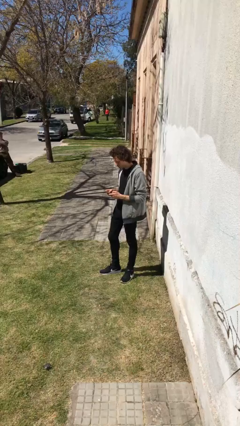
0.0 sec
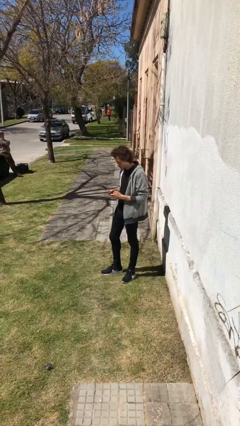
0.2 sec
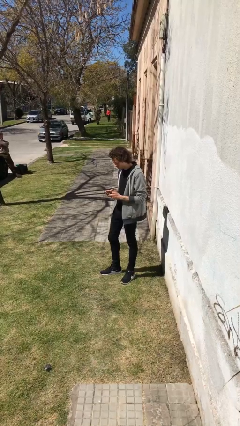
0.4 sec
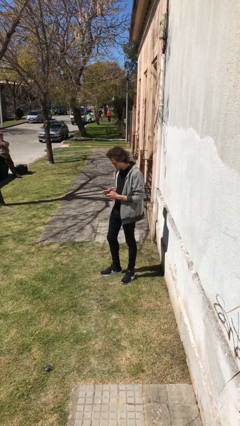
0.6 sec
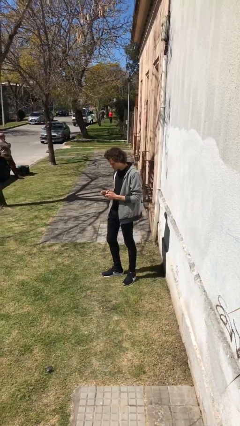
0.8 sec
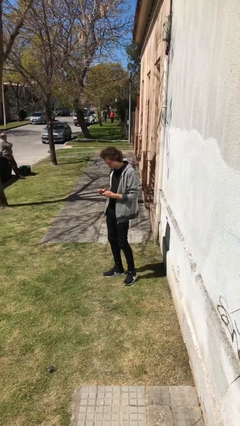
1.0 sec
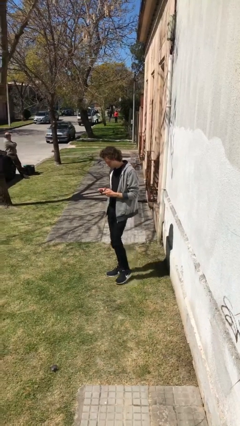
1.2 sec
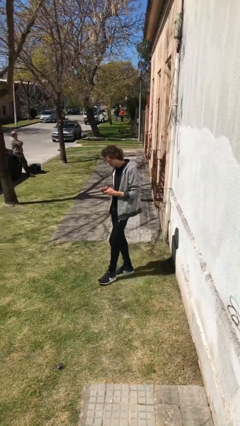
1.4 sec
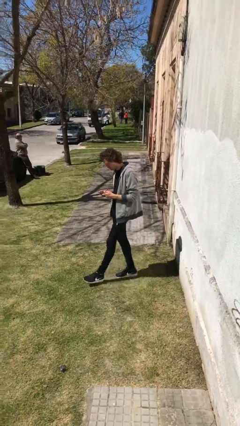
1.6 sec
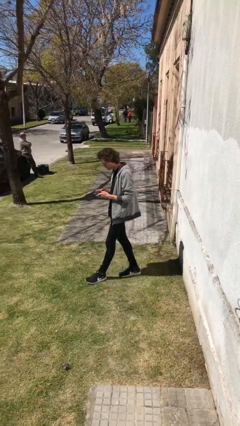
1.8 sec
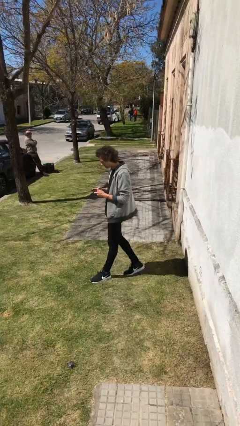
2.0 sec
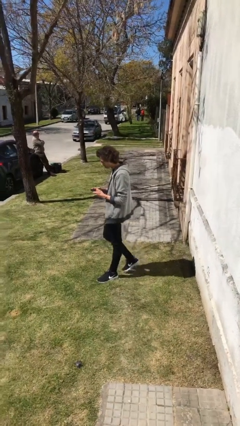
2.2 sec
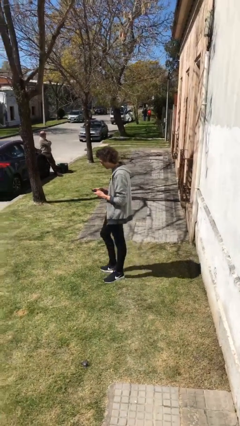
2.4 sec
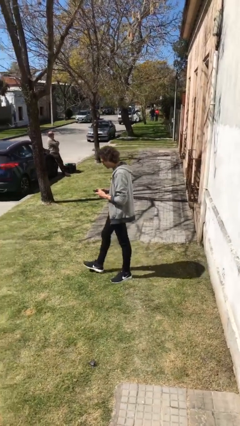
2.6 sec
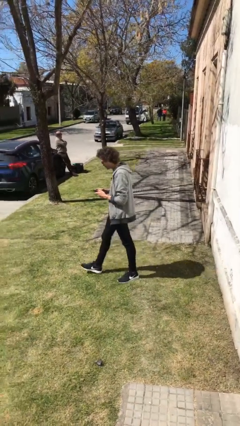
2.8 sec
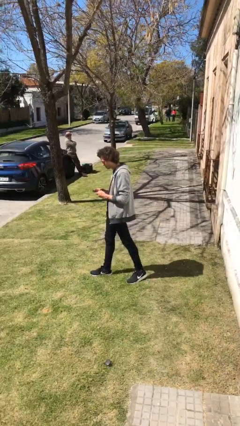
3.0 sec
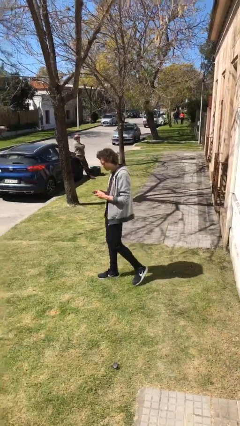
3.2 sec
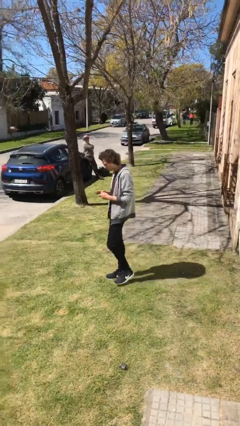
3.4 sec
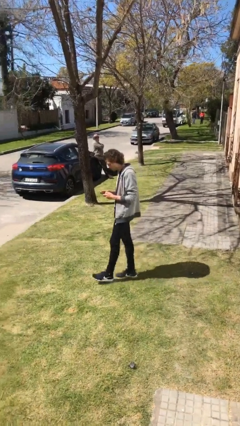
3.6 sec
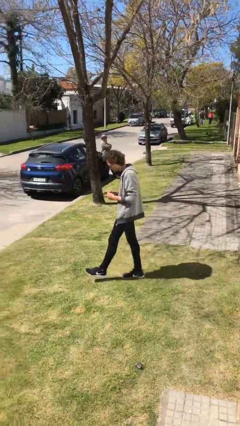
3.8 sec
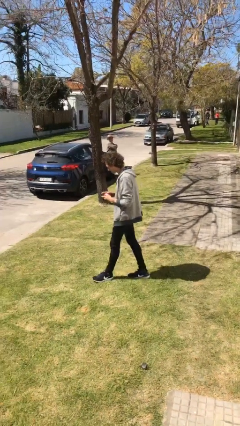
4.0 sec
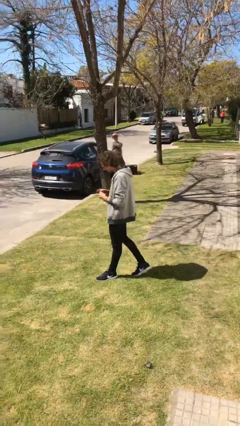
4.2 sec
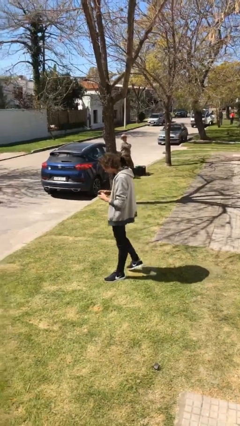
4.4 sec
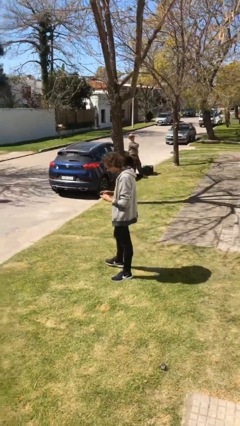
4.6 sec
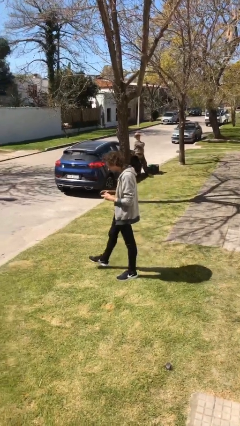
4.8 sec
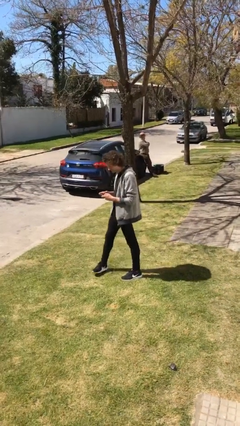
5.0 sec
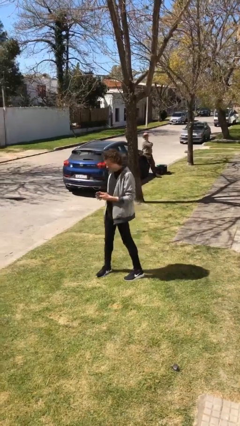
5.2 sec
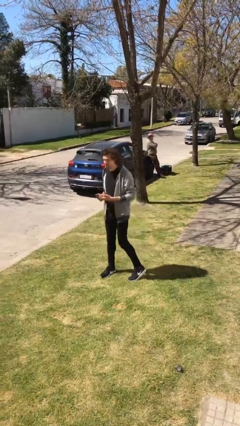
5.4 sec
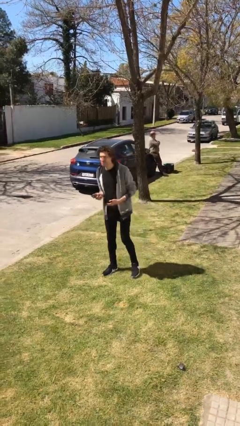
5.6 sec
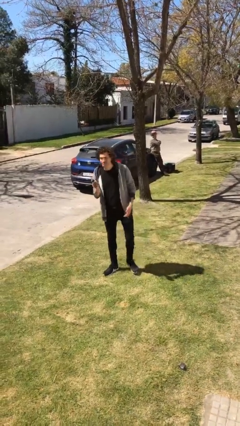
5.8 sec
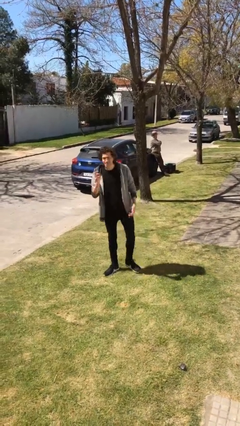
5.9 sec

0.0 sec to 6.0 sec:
person texts on phone

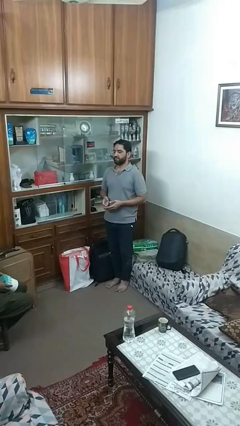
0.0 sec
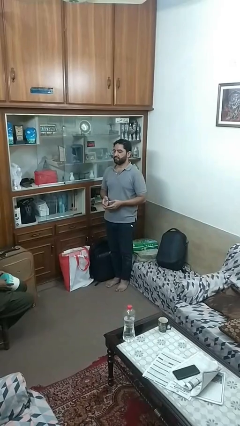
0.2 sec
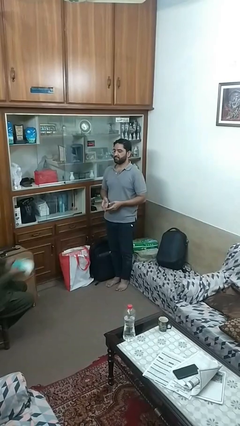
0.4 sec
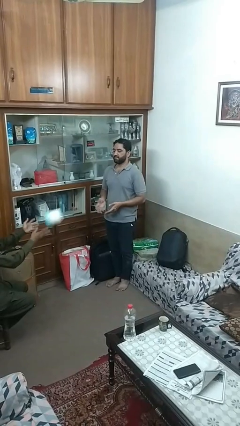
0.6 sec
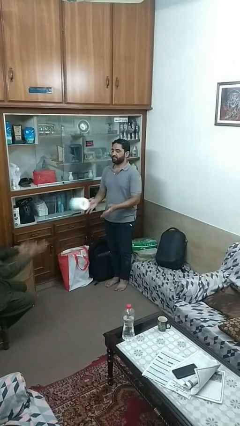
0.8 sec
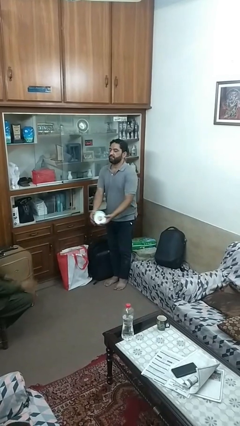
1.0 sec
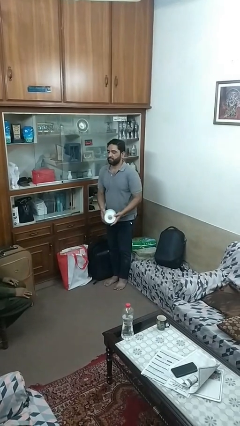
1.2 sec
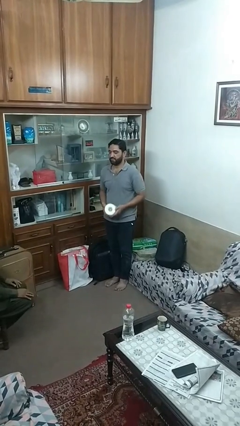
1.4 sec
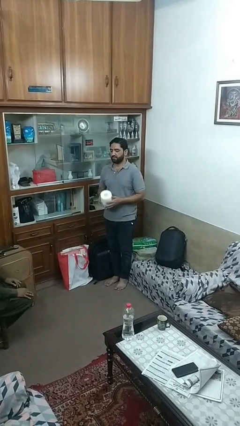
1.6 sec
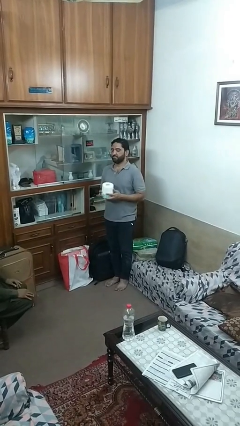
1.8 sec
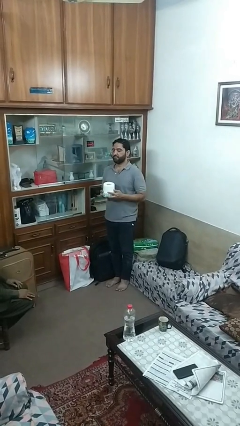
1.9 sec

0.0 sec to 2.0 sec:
person catches object from person

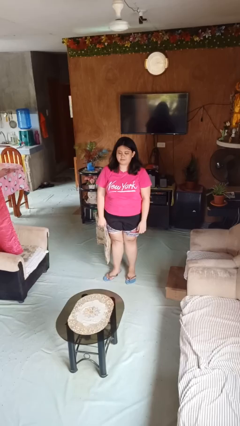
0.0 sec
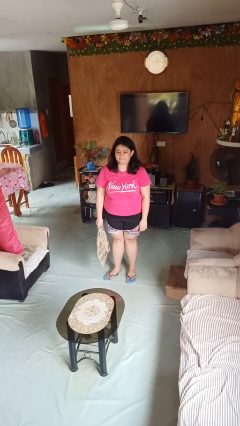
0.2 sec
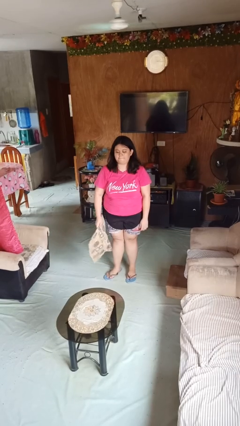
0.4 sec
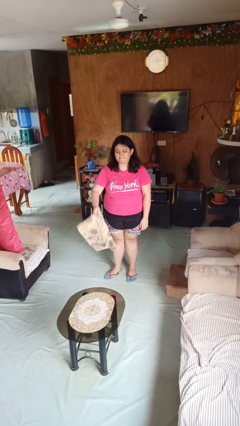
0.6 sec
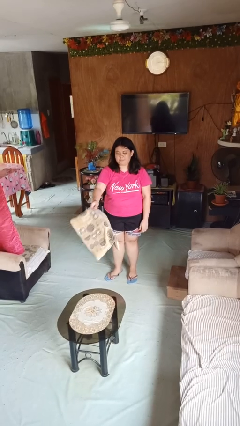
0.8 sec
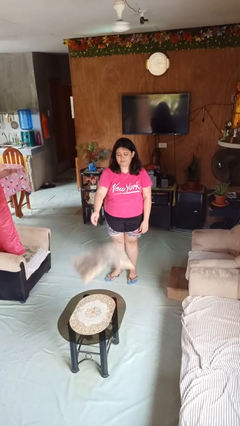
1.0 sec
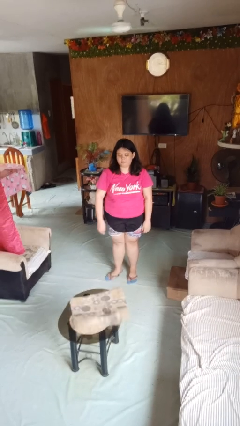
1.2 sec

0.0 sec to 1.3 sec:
person throws object on table

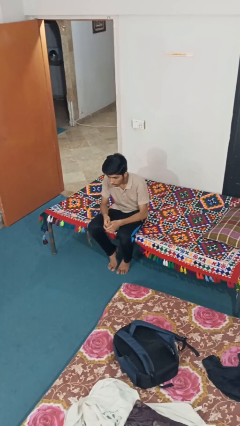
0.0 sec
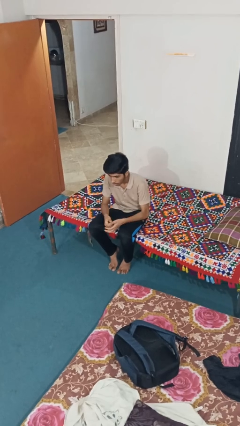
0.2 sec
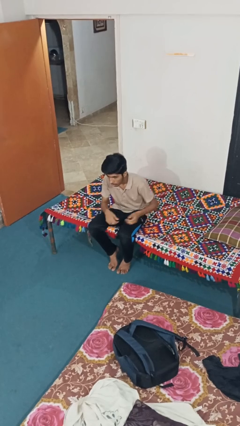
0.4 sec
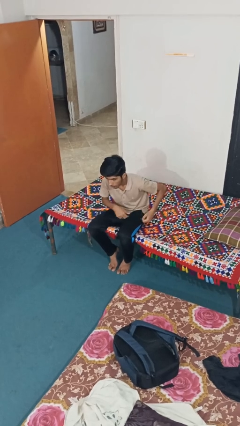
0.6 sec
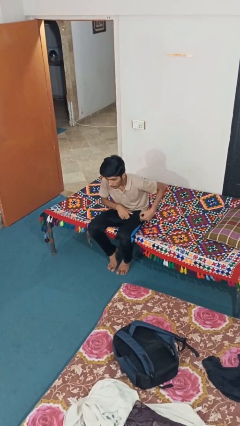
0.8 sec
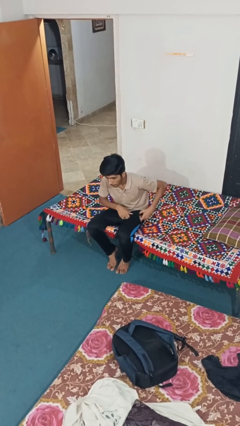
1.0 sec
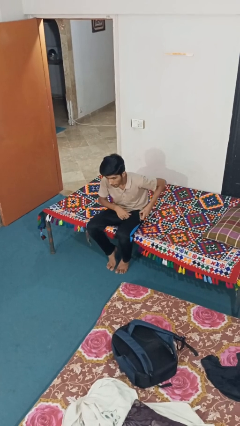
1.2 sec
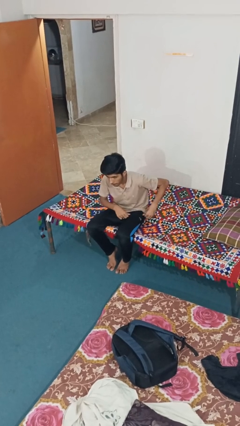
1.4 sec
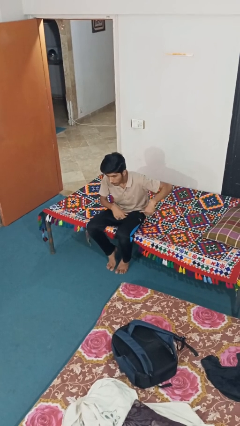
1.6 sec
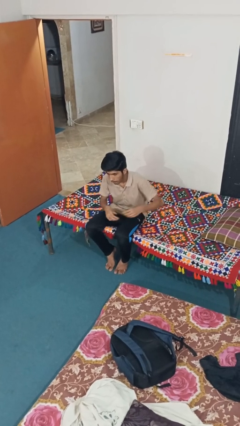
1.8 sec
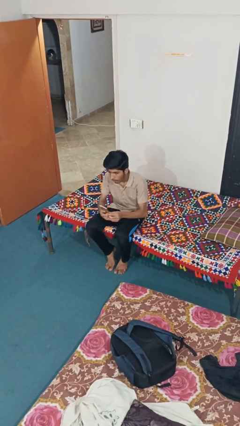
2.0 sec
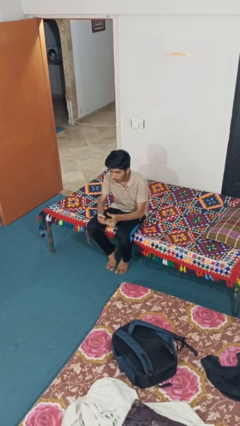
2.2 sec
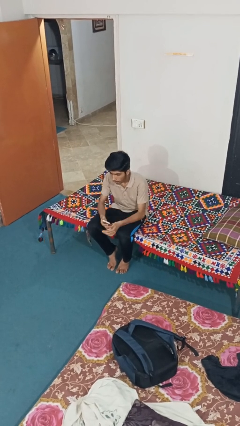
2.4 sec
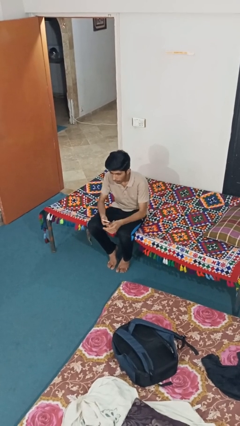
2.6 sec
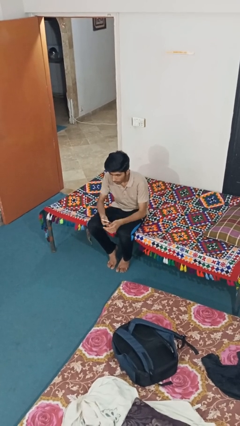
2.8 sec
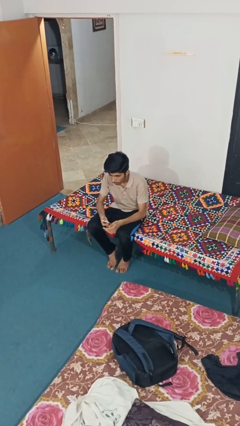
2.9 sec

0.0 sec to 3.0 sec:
person takes phone from pocket

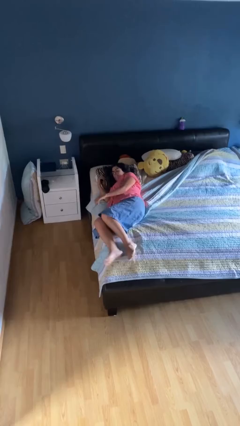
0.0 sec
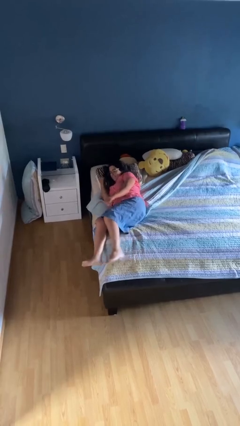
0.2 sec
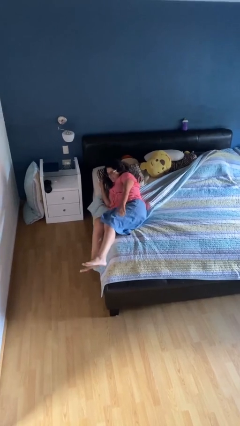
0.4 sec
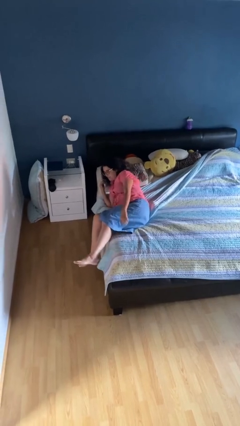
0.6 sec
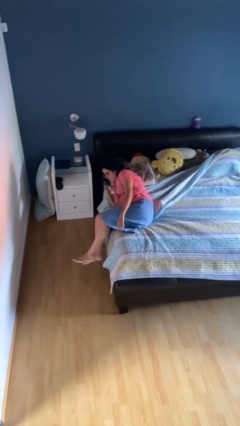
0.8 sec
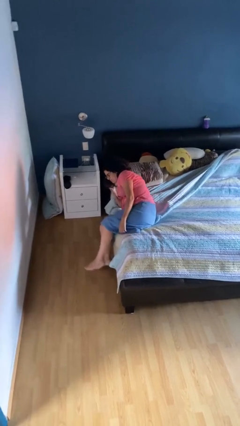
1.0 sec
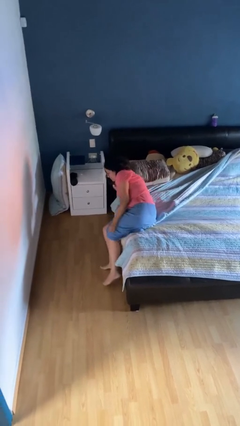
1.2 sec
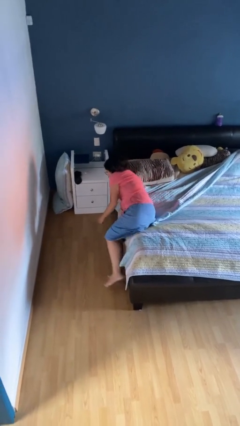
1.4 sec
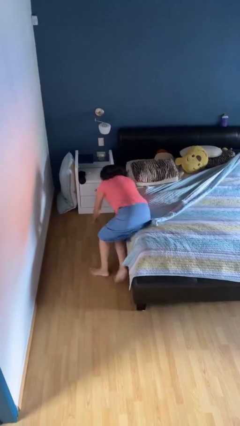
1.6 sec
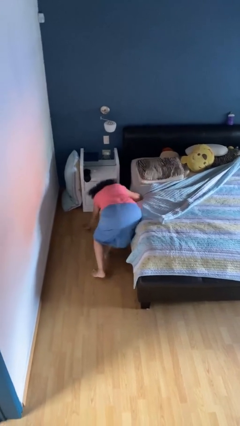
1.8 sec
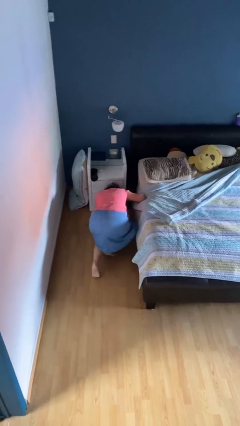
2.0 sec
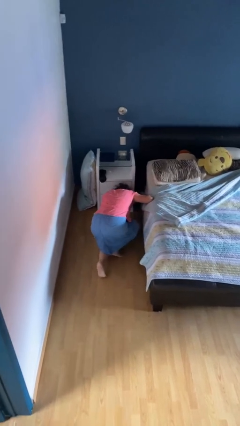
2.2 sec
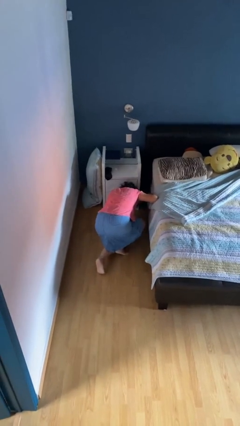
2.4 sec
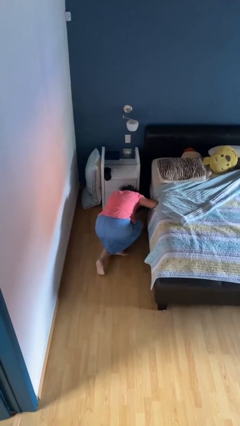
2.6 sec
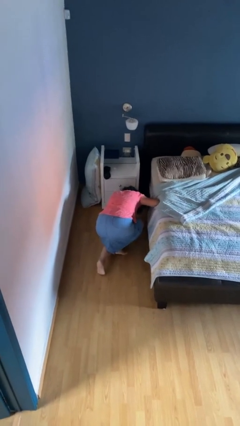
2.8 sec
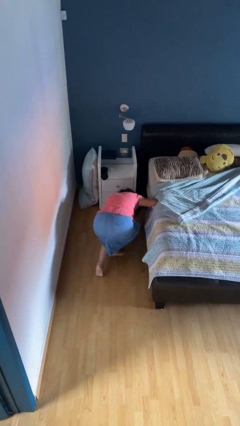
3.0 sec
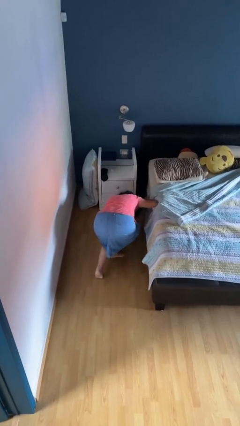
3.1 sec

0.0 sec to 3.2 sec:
person falls from bed

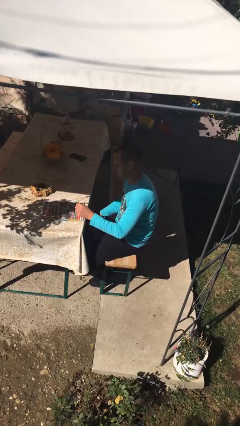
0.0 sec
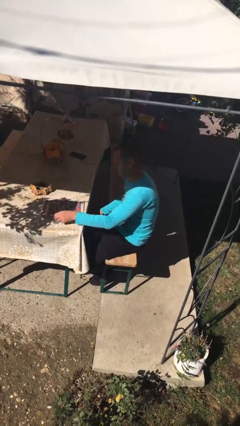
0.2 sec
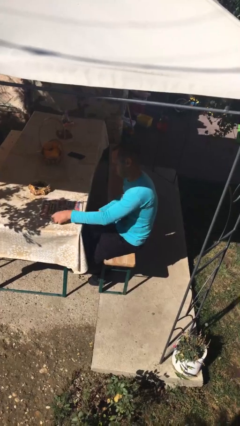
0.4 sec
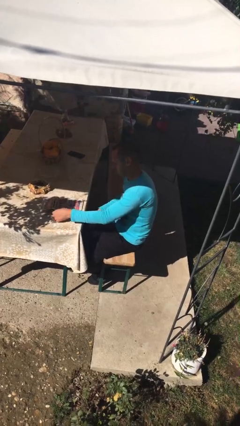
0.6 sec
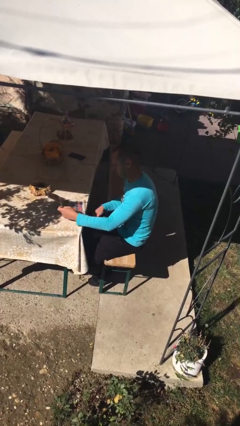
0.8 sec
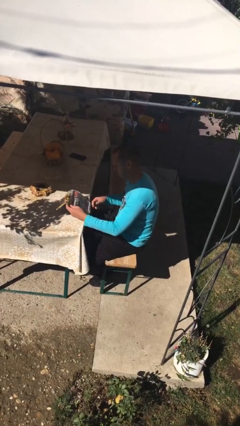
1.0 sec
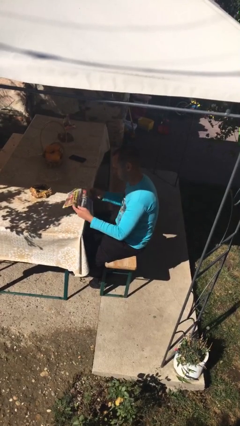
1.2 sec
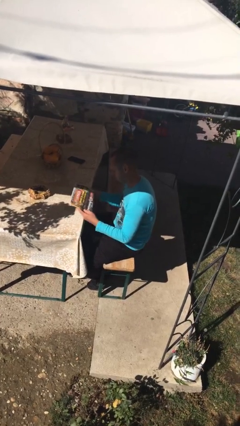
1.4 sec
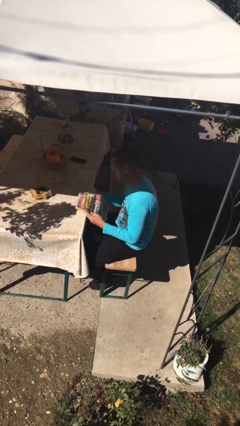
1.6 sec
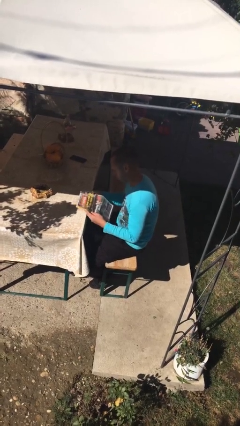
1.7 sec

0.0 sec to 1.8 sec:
person picks up object from table

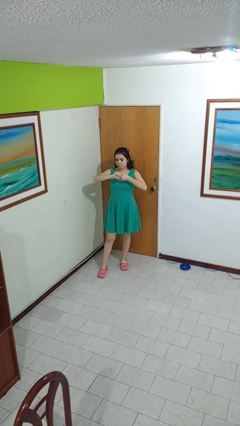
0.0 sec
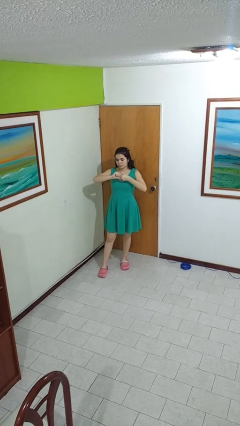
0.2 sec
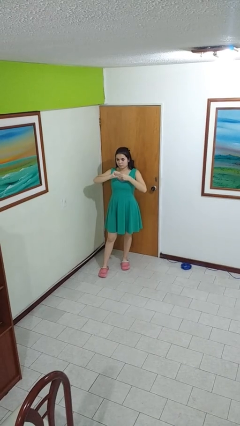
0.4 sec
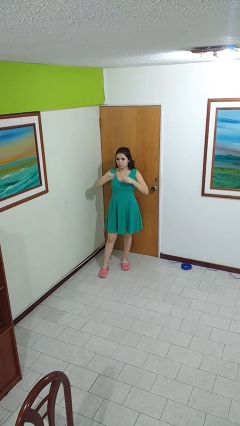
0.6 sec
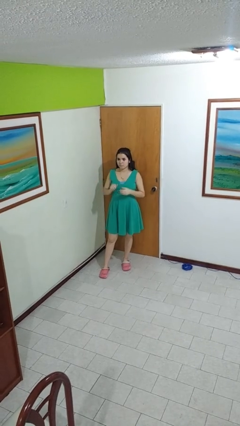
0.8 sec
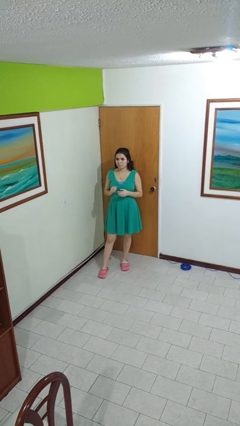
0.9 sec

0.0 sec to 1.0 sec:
person cracks knuckles
